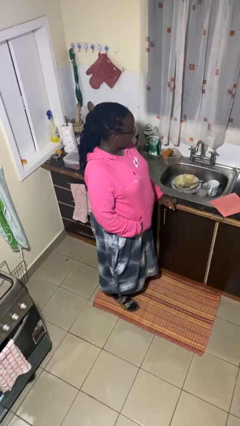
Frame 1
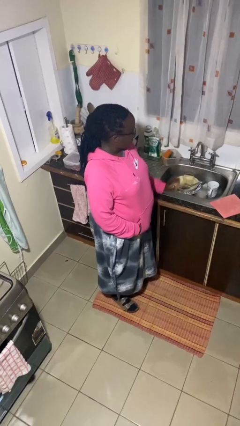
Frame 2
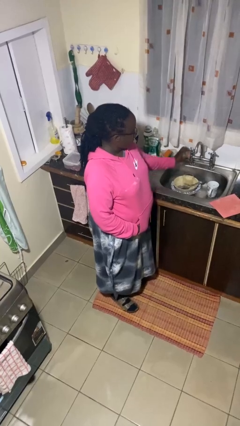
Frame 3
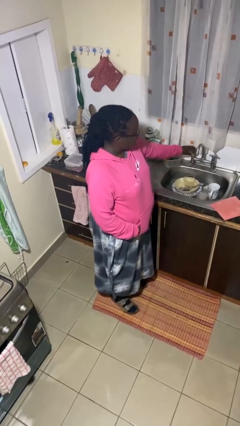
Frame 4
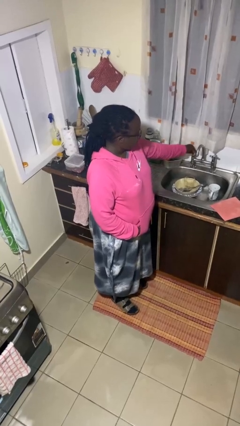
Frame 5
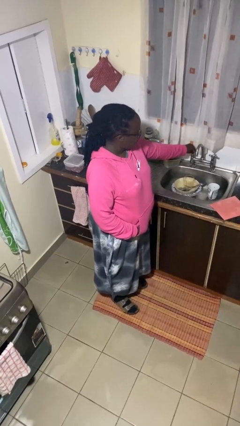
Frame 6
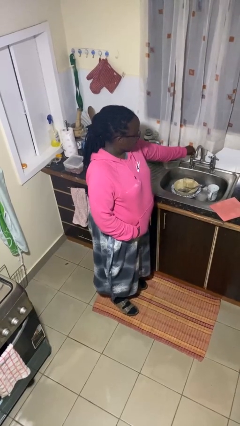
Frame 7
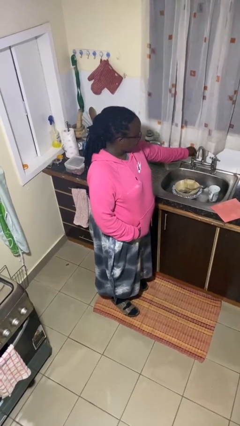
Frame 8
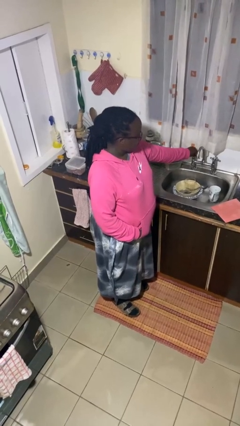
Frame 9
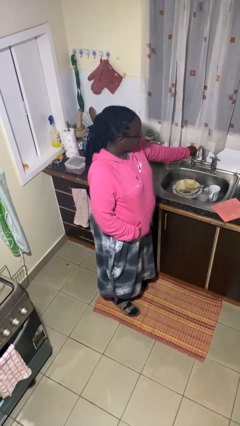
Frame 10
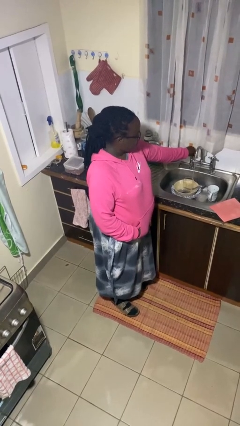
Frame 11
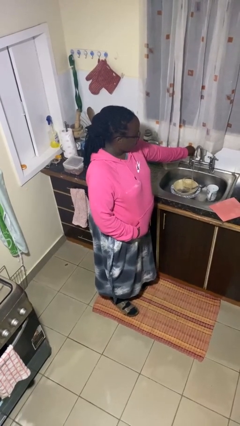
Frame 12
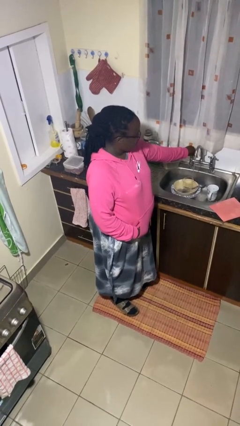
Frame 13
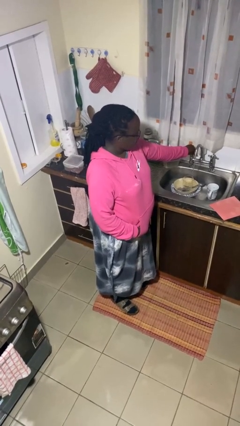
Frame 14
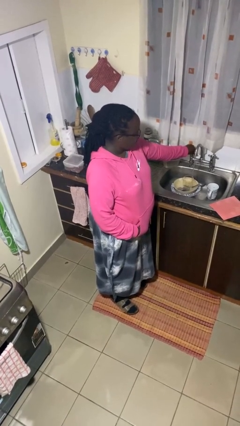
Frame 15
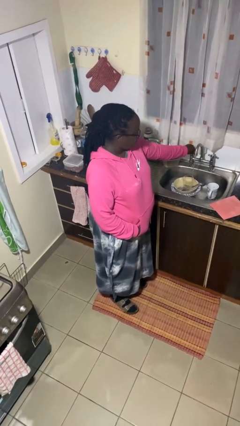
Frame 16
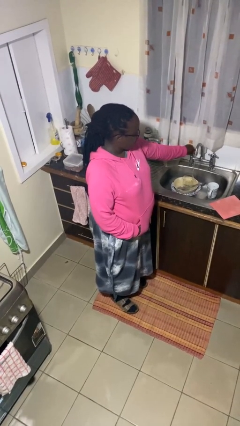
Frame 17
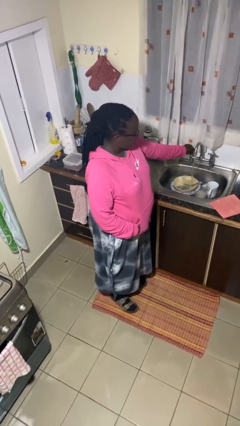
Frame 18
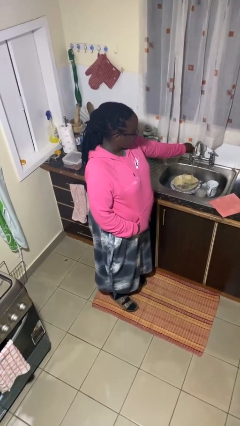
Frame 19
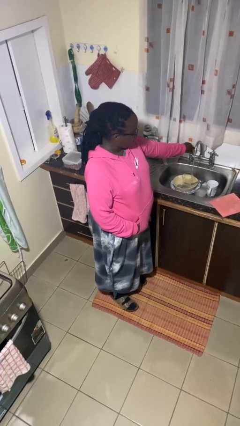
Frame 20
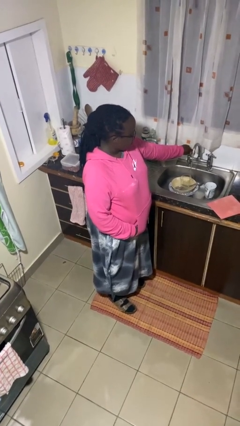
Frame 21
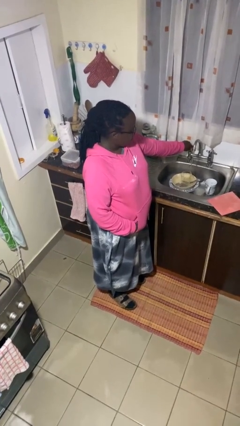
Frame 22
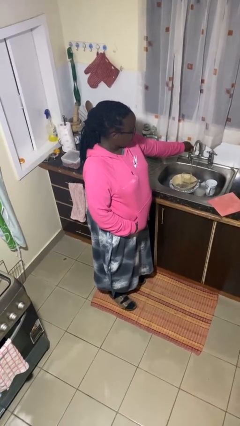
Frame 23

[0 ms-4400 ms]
person turns on faucet

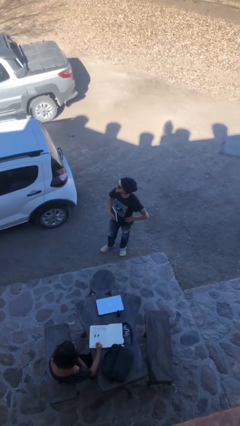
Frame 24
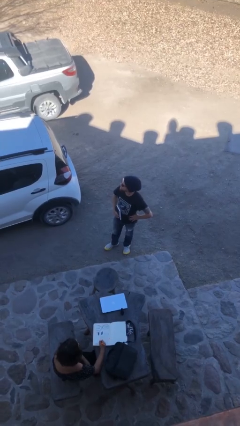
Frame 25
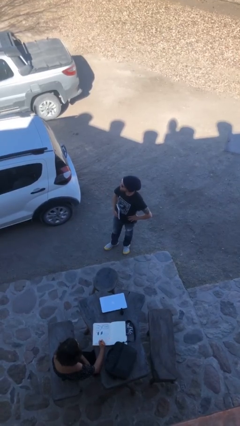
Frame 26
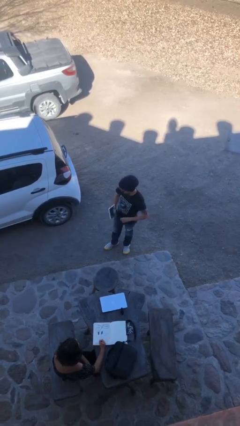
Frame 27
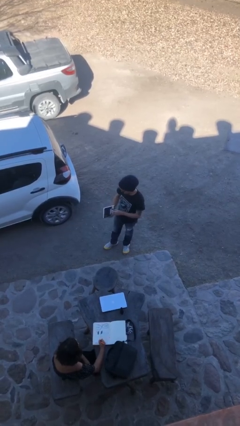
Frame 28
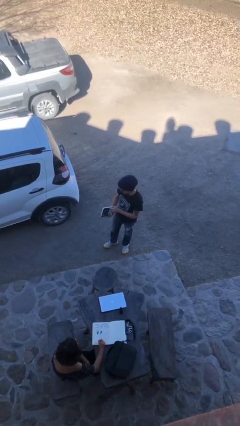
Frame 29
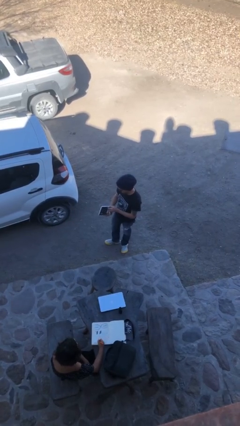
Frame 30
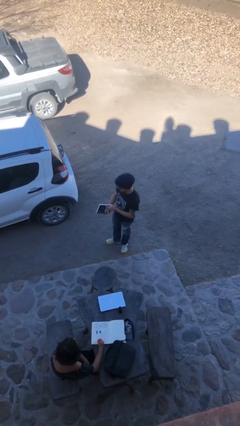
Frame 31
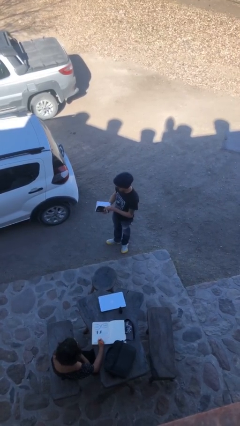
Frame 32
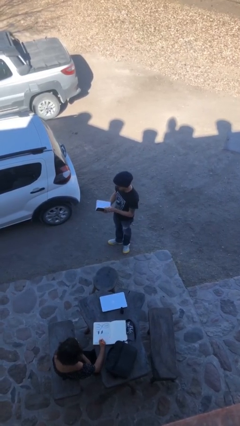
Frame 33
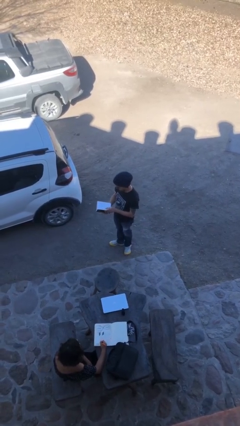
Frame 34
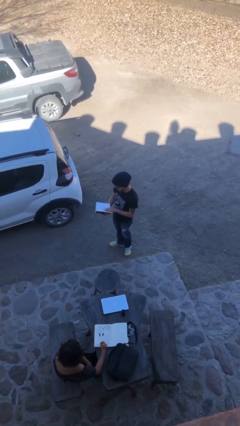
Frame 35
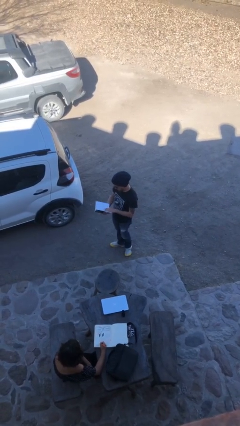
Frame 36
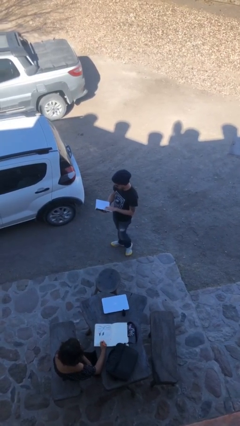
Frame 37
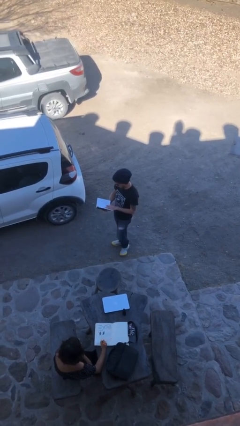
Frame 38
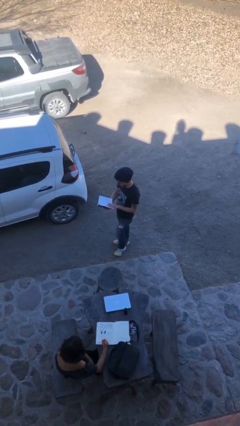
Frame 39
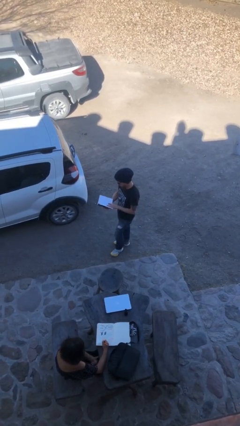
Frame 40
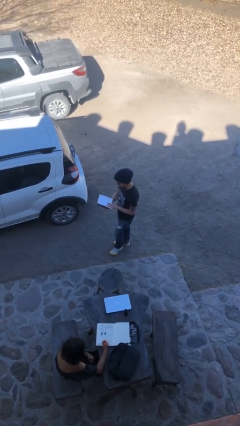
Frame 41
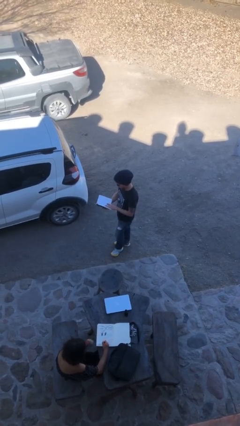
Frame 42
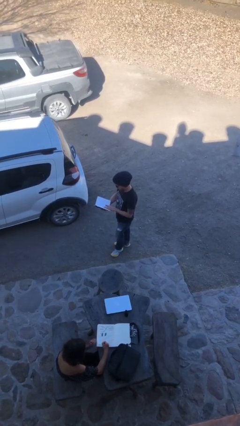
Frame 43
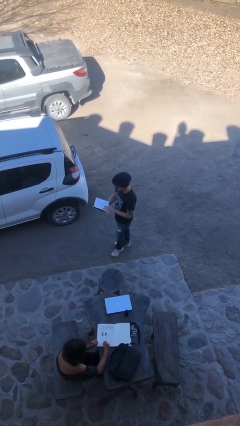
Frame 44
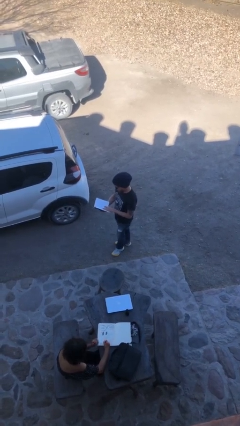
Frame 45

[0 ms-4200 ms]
person reads document

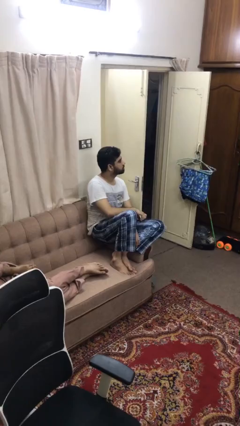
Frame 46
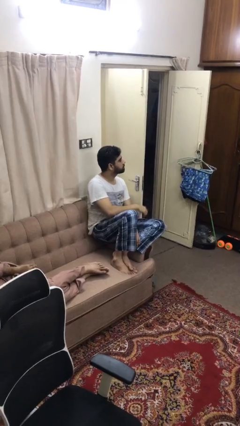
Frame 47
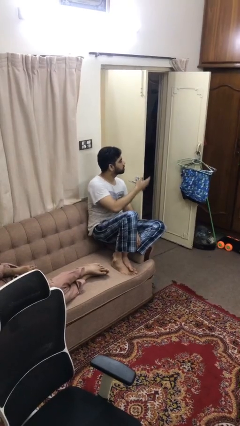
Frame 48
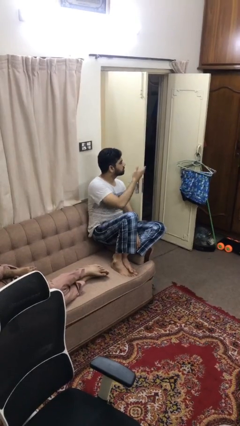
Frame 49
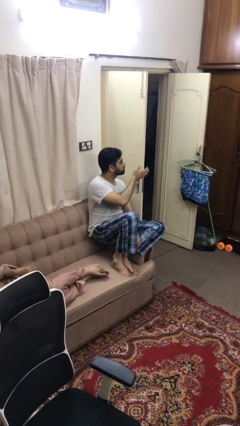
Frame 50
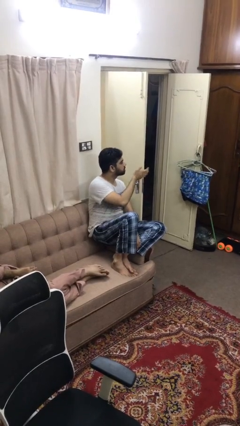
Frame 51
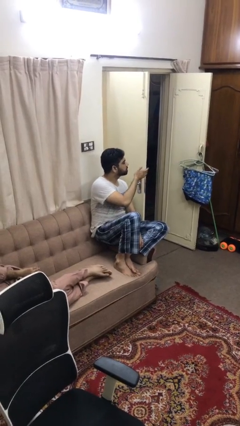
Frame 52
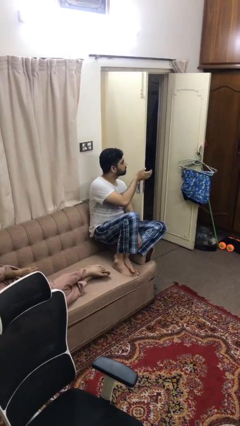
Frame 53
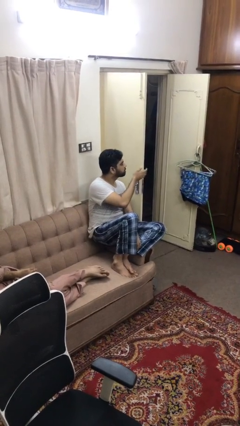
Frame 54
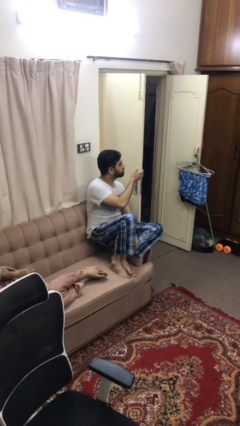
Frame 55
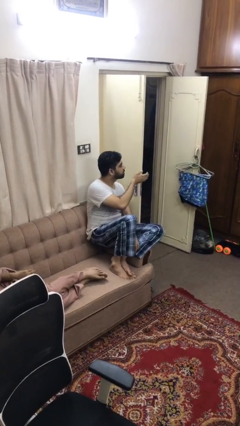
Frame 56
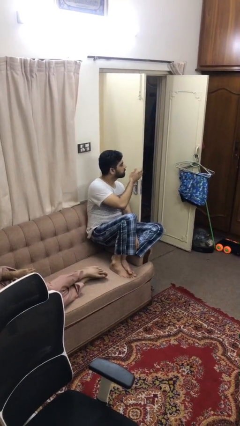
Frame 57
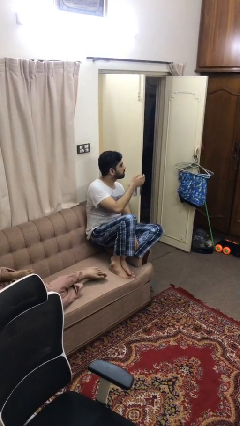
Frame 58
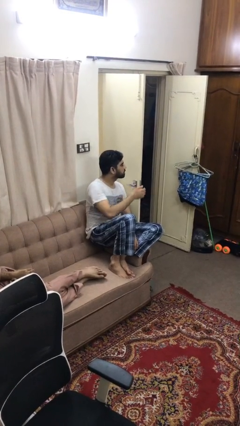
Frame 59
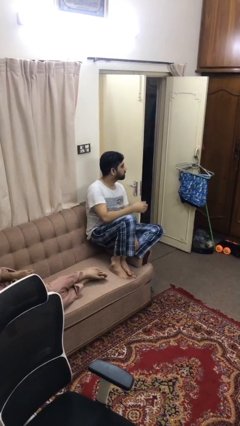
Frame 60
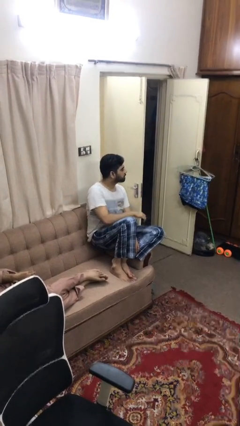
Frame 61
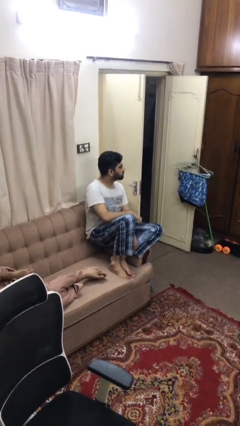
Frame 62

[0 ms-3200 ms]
person taps object with finger

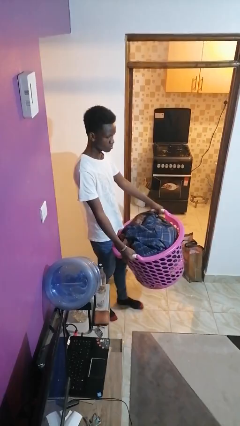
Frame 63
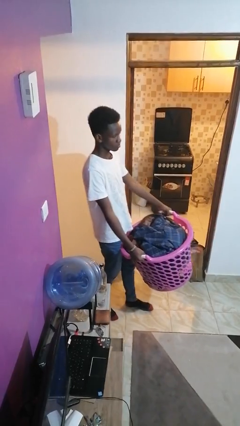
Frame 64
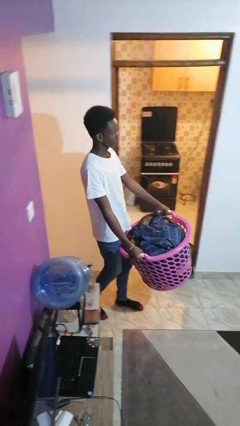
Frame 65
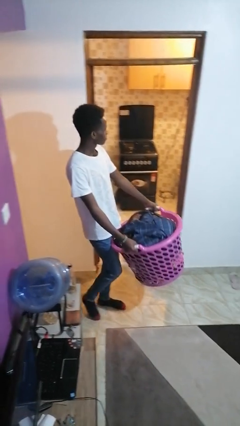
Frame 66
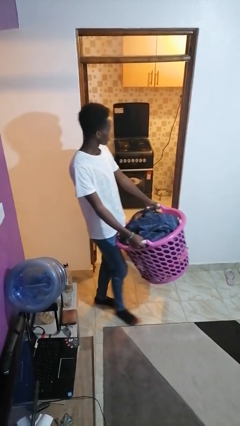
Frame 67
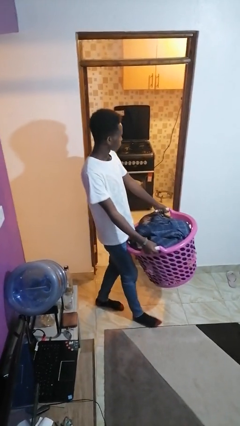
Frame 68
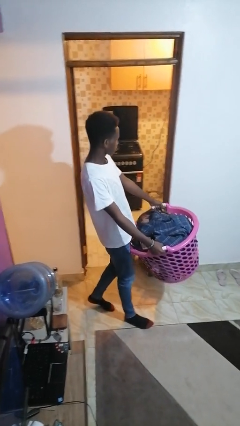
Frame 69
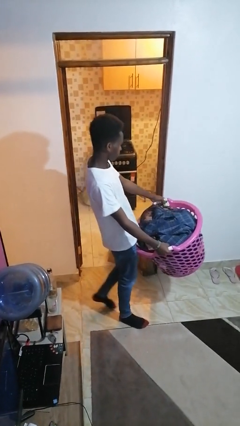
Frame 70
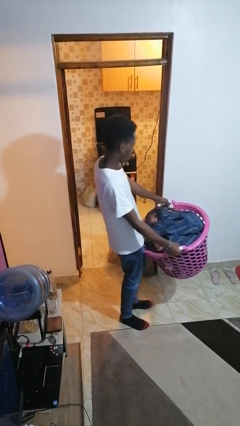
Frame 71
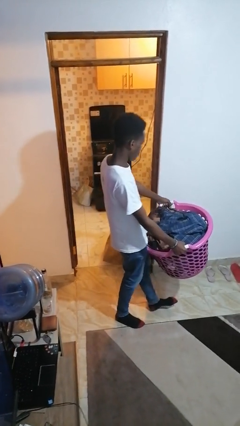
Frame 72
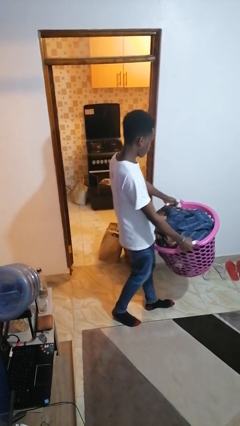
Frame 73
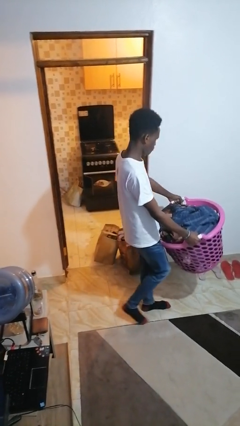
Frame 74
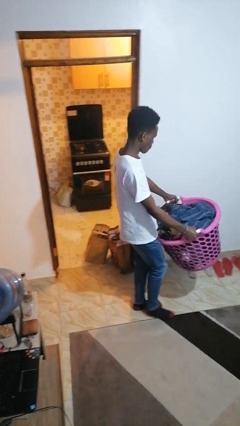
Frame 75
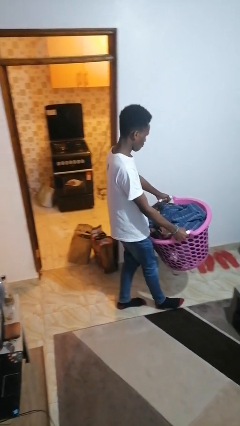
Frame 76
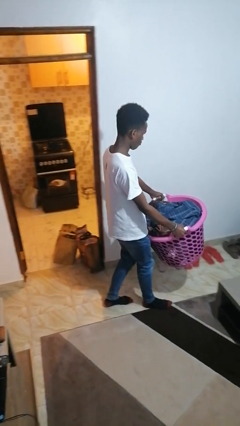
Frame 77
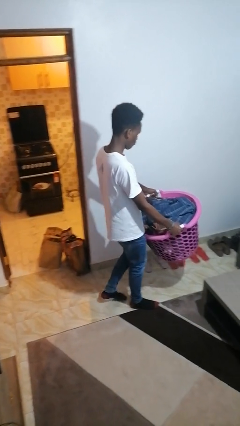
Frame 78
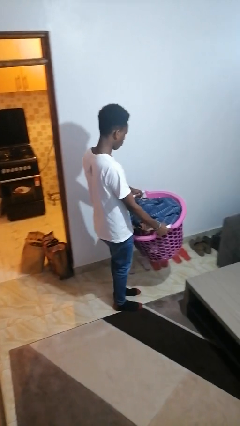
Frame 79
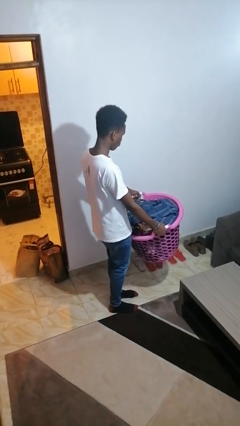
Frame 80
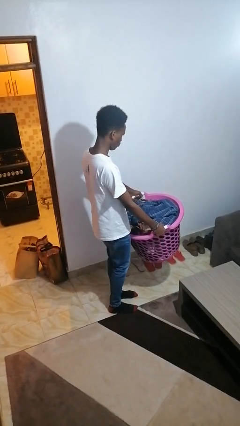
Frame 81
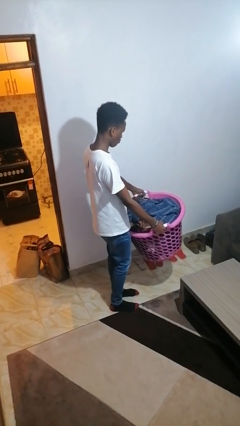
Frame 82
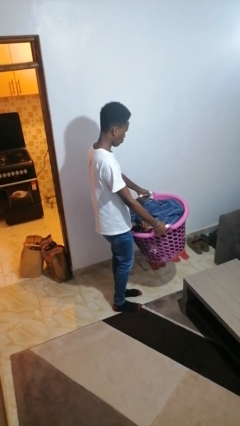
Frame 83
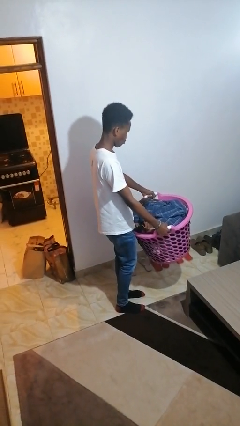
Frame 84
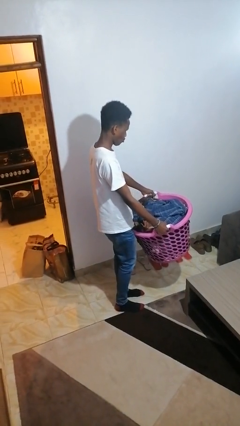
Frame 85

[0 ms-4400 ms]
person carries laundry basket

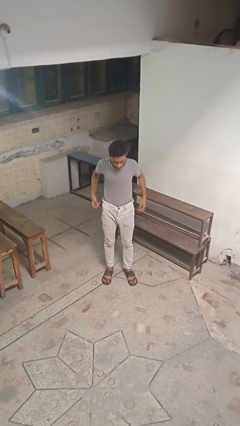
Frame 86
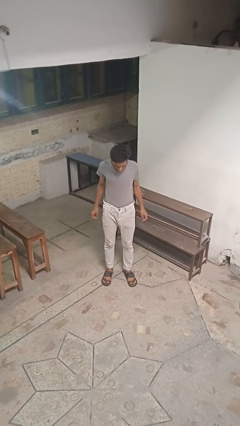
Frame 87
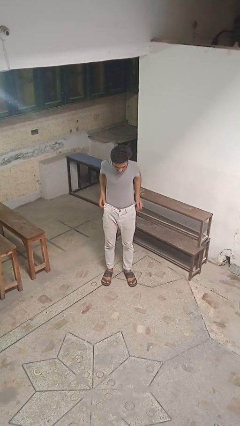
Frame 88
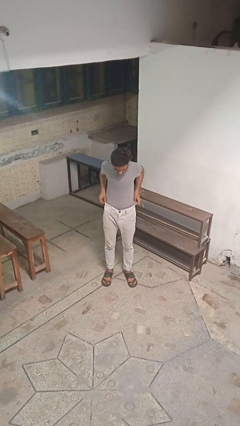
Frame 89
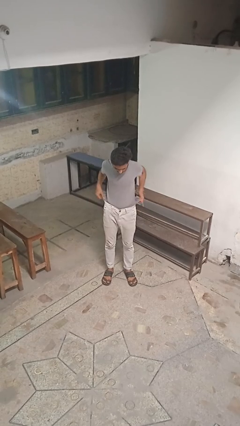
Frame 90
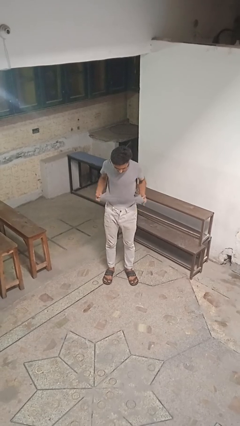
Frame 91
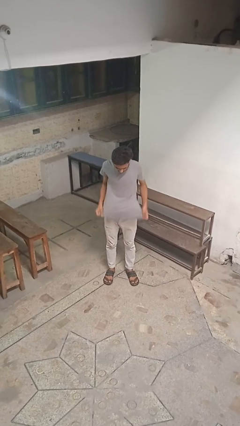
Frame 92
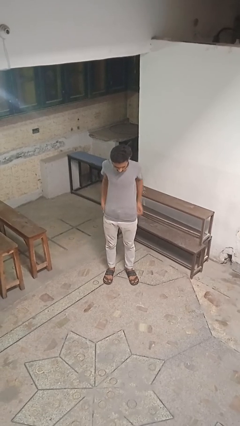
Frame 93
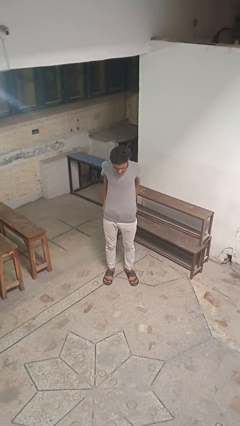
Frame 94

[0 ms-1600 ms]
person untucks shirt

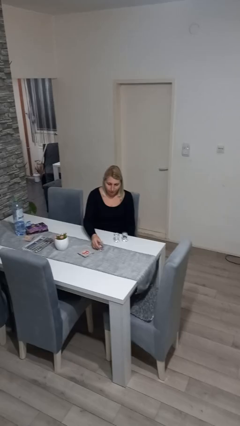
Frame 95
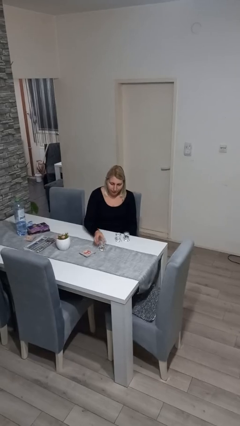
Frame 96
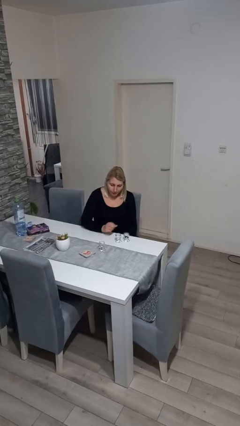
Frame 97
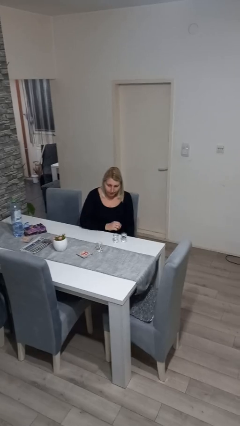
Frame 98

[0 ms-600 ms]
person puts down object on table
